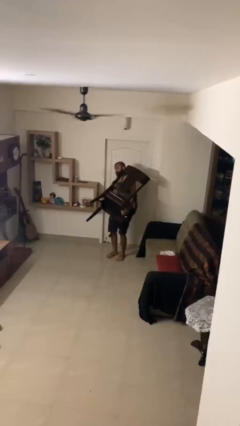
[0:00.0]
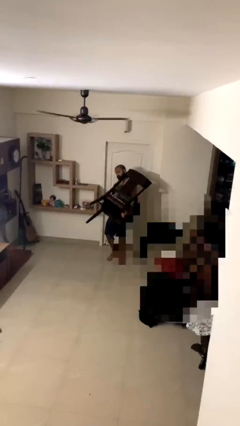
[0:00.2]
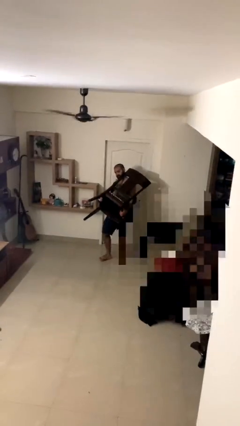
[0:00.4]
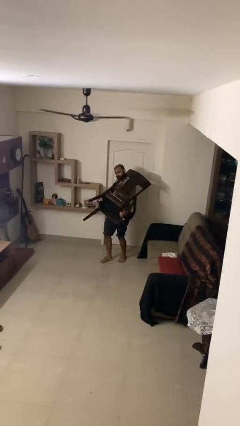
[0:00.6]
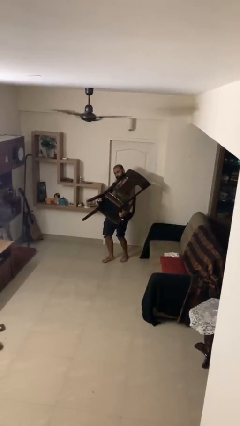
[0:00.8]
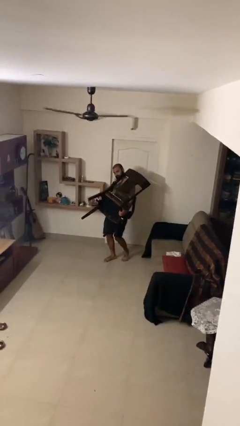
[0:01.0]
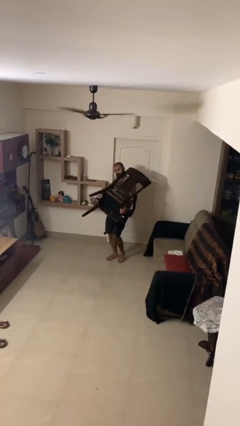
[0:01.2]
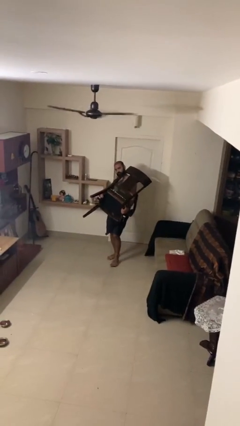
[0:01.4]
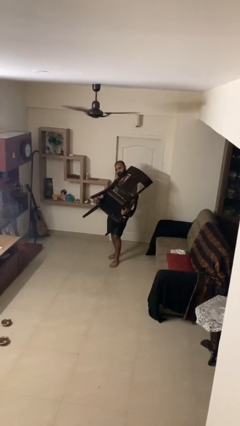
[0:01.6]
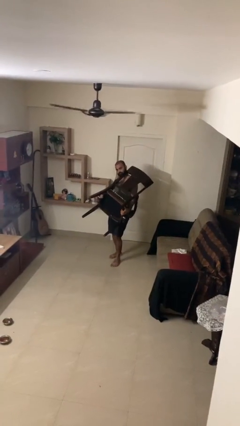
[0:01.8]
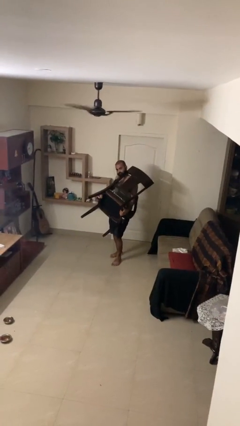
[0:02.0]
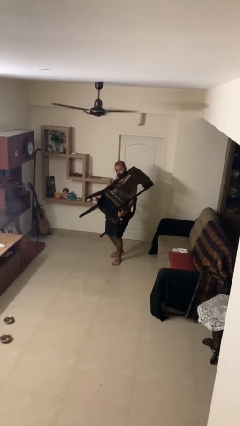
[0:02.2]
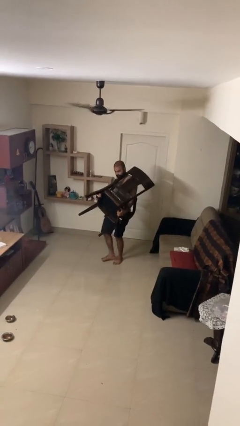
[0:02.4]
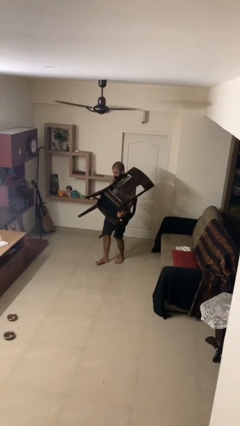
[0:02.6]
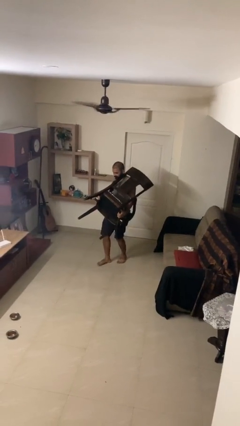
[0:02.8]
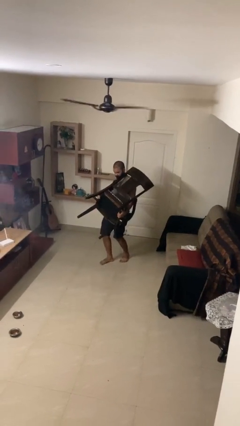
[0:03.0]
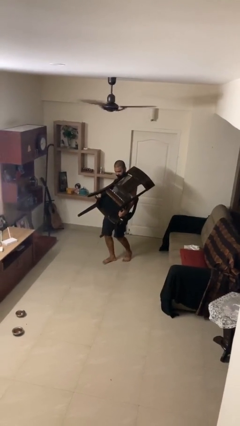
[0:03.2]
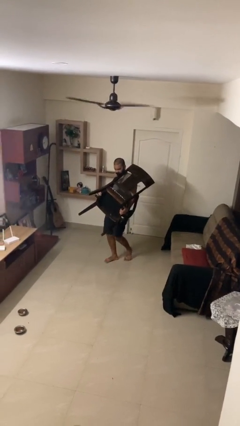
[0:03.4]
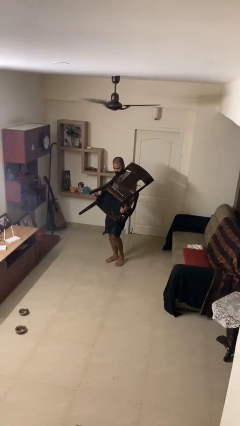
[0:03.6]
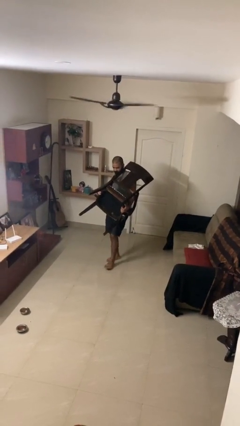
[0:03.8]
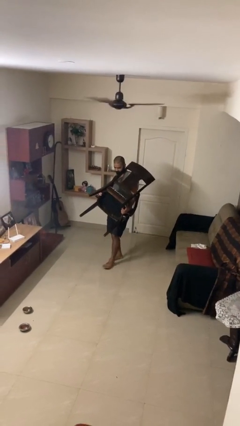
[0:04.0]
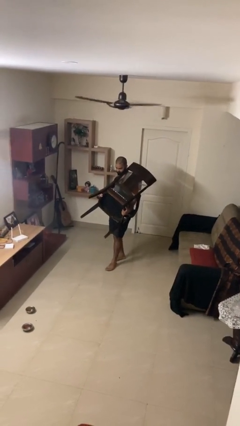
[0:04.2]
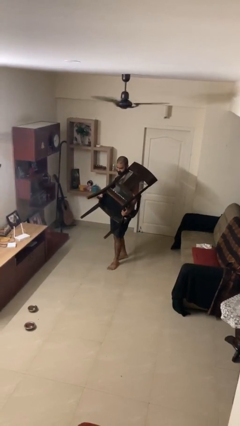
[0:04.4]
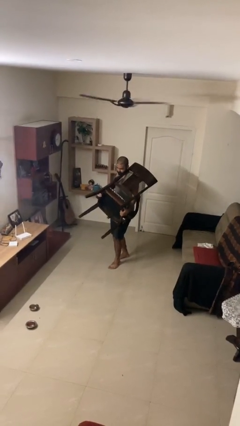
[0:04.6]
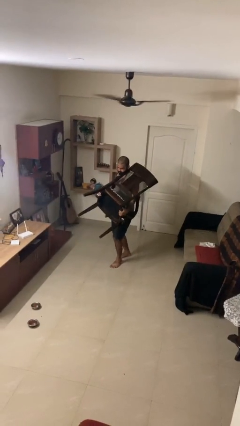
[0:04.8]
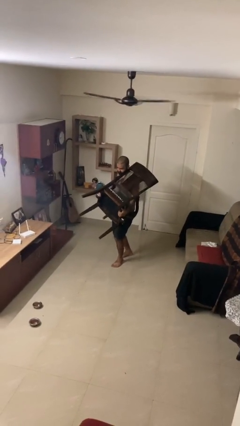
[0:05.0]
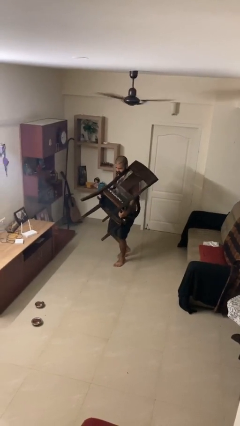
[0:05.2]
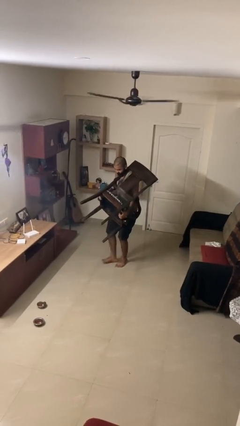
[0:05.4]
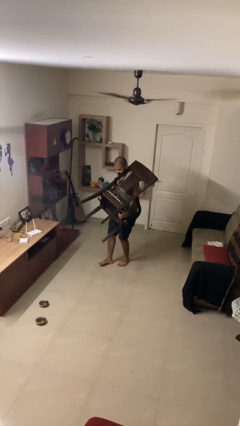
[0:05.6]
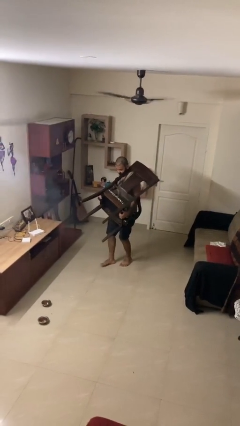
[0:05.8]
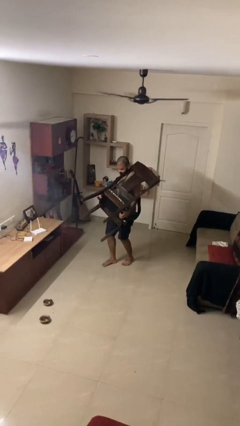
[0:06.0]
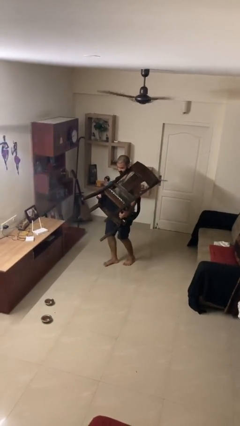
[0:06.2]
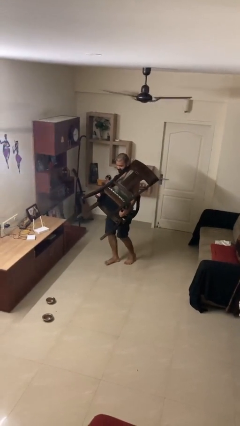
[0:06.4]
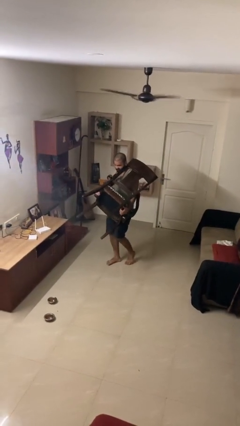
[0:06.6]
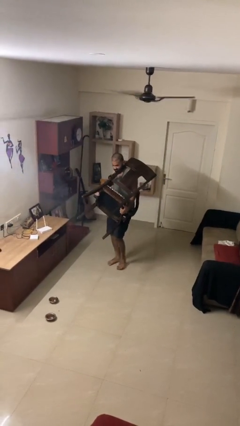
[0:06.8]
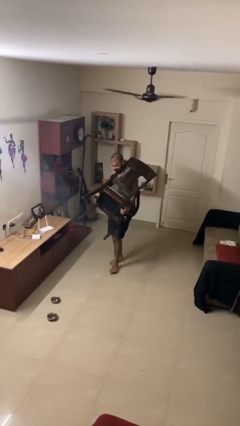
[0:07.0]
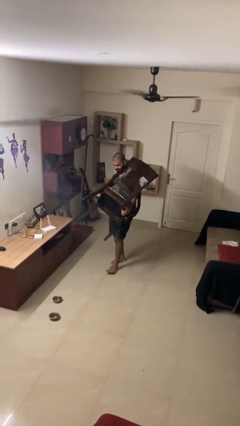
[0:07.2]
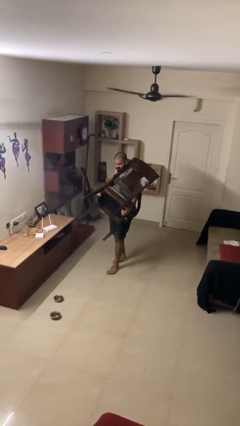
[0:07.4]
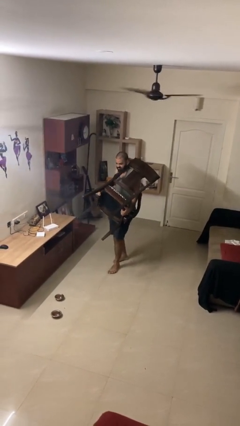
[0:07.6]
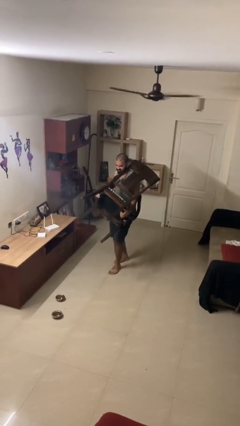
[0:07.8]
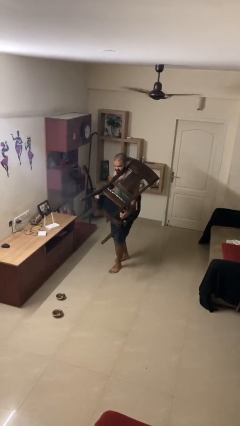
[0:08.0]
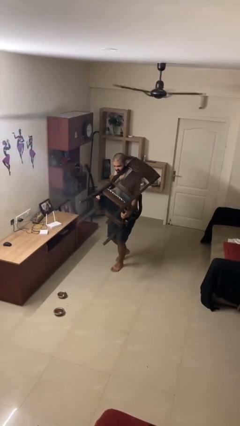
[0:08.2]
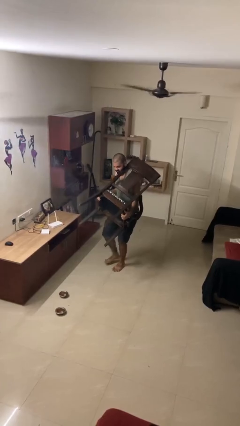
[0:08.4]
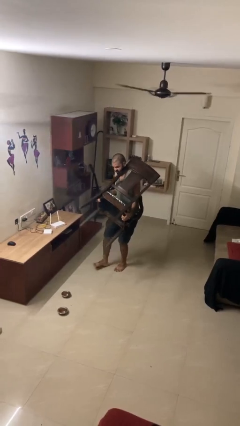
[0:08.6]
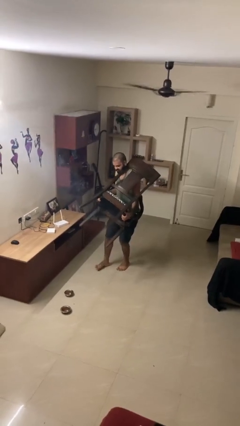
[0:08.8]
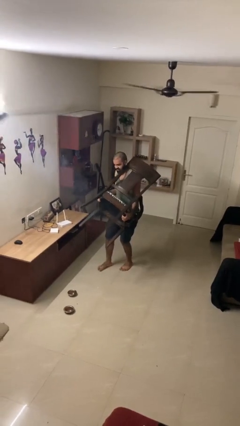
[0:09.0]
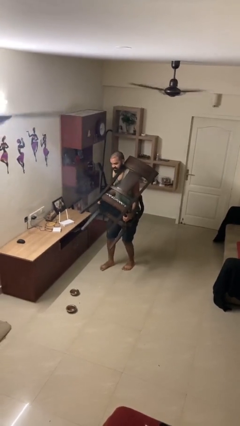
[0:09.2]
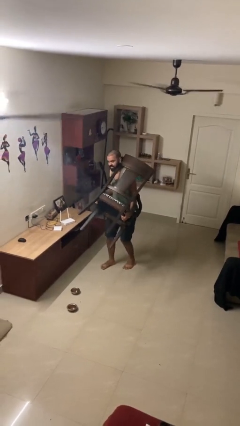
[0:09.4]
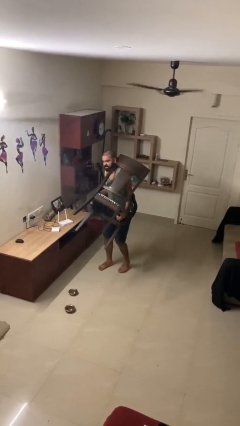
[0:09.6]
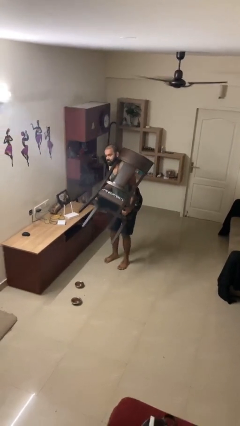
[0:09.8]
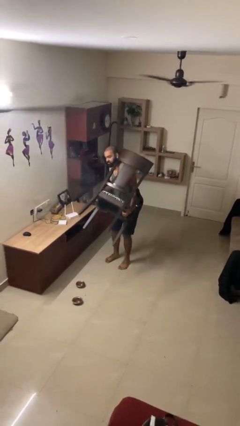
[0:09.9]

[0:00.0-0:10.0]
person carries heavy object

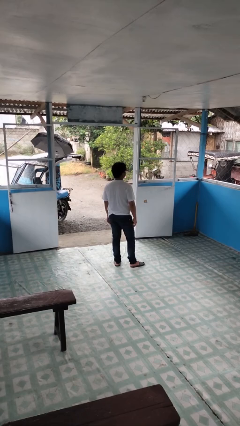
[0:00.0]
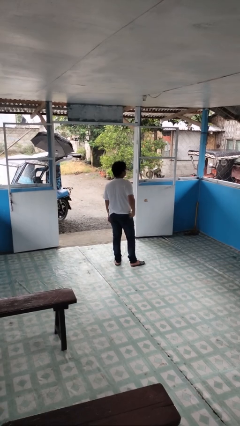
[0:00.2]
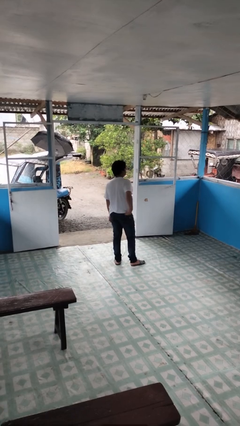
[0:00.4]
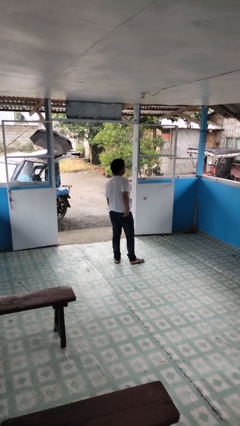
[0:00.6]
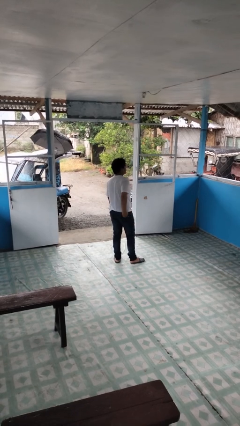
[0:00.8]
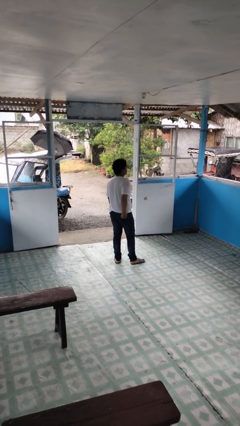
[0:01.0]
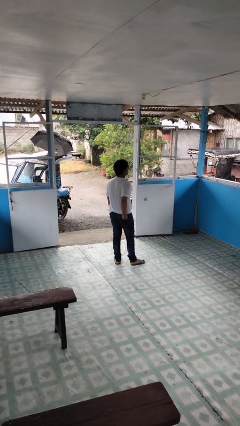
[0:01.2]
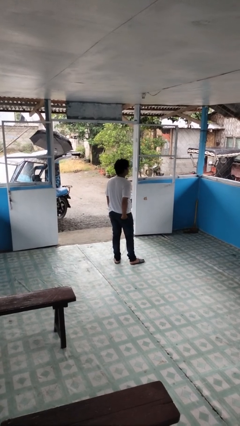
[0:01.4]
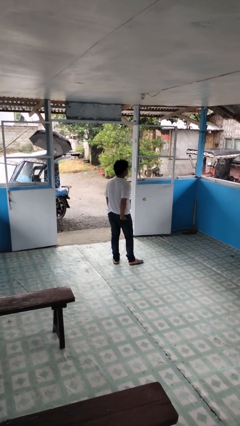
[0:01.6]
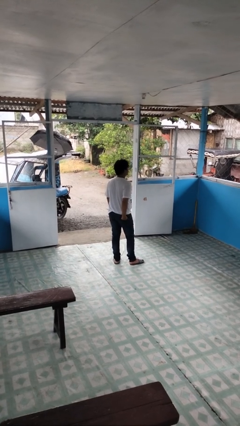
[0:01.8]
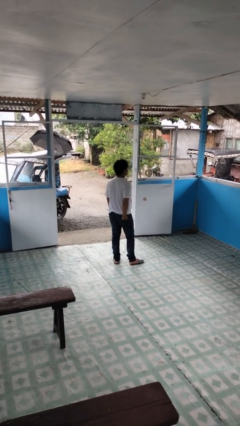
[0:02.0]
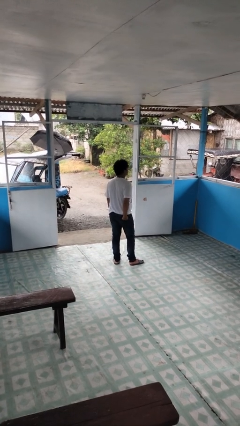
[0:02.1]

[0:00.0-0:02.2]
person puts hands in back pockets

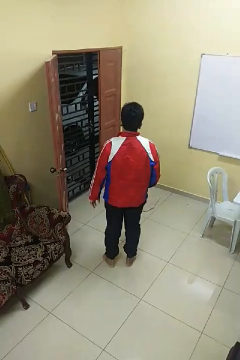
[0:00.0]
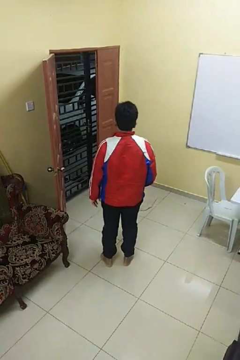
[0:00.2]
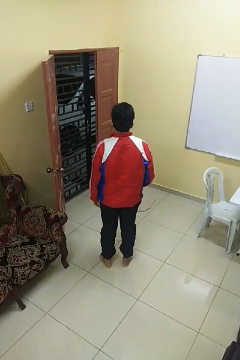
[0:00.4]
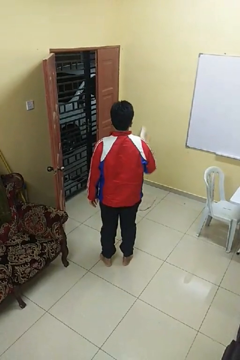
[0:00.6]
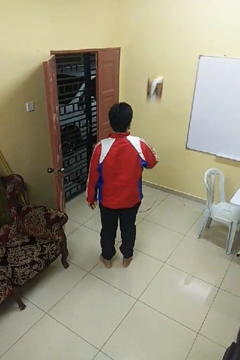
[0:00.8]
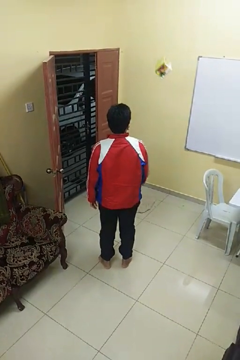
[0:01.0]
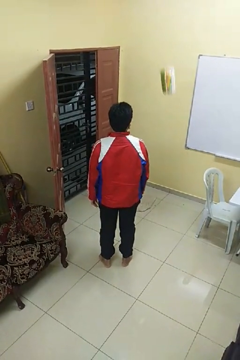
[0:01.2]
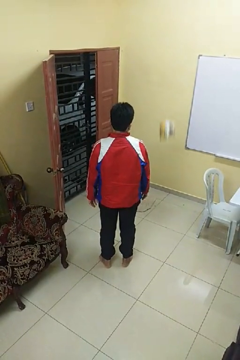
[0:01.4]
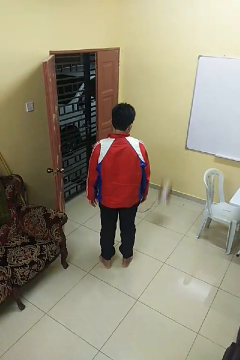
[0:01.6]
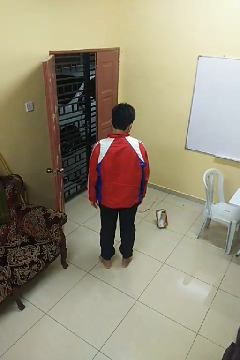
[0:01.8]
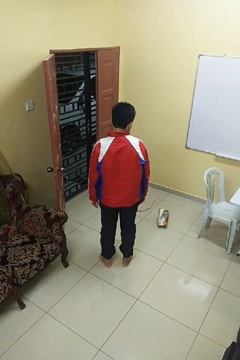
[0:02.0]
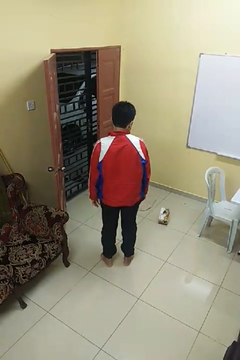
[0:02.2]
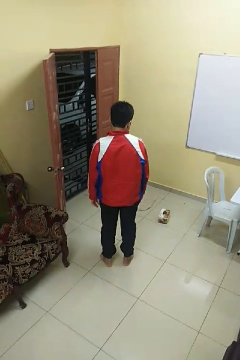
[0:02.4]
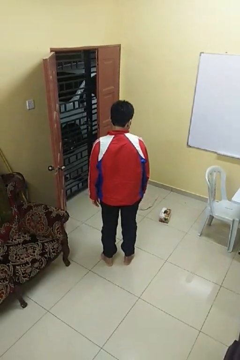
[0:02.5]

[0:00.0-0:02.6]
person throws object into air

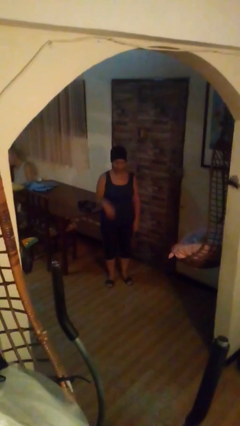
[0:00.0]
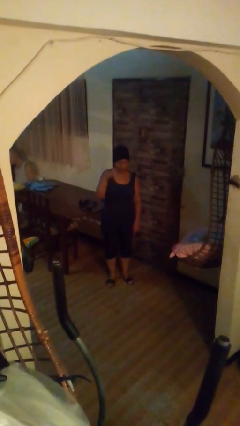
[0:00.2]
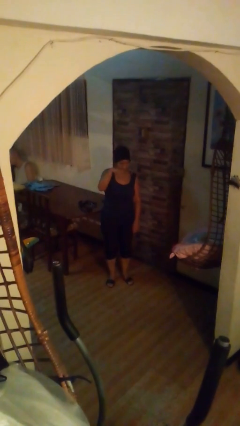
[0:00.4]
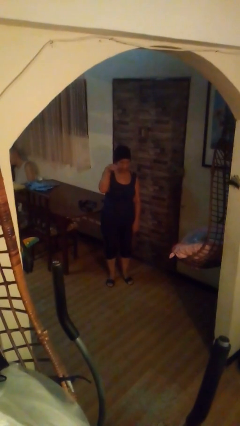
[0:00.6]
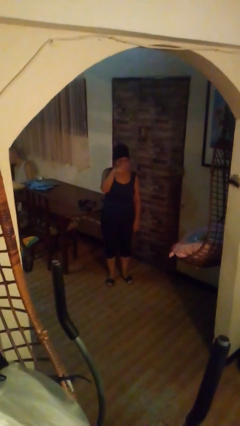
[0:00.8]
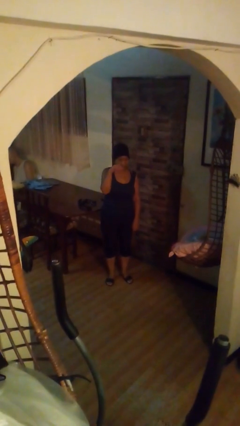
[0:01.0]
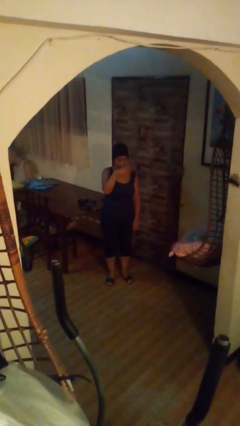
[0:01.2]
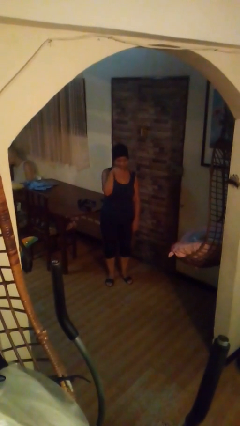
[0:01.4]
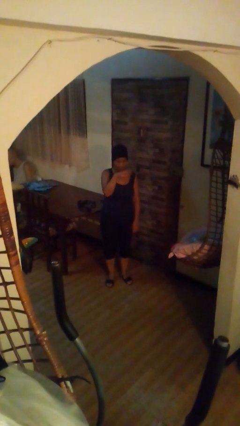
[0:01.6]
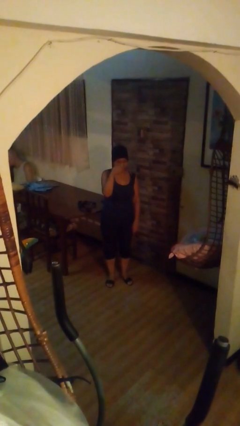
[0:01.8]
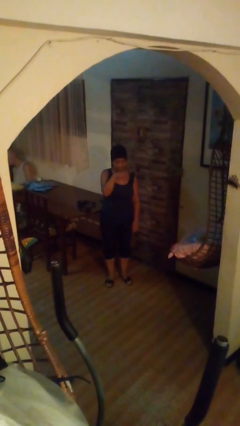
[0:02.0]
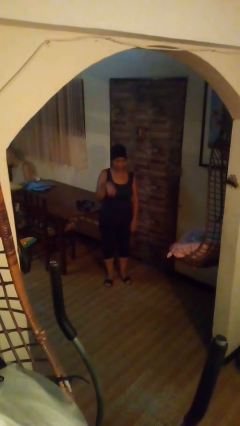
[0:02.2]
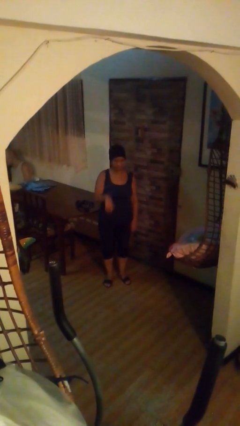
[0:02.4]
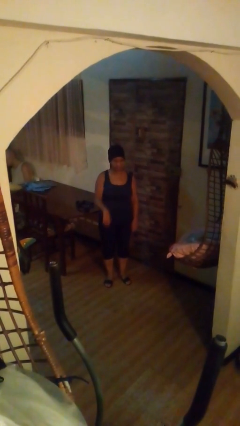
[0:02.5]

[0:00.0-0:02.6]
person gestures come here

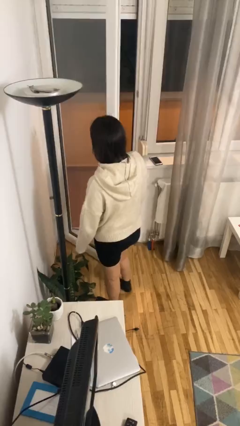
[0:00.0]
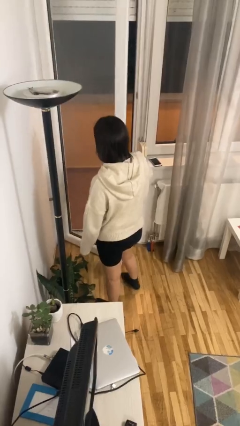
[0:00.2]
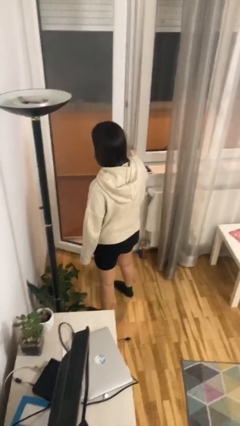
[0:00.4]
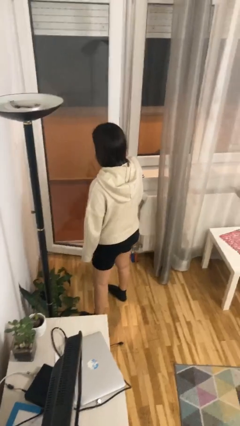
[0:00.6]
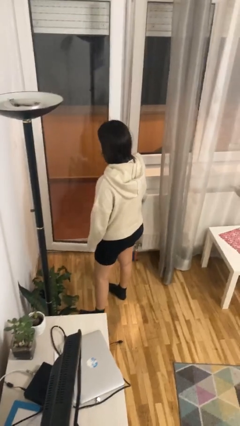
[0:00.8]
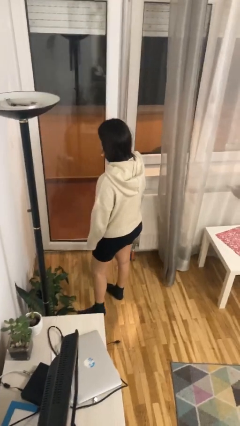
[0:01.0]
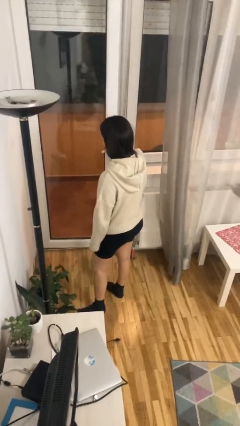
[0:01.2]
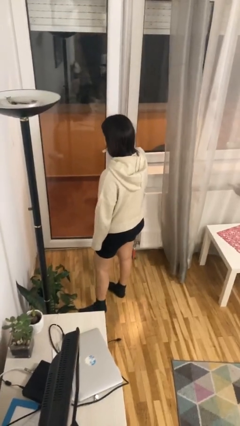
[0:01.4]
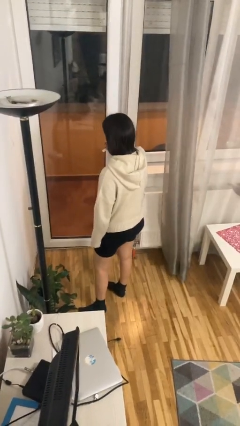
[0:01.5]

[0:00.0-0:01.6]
person closes facility door
